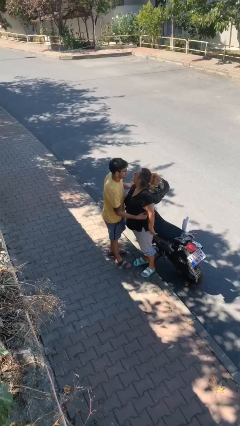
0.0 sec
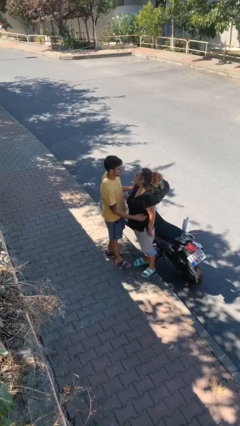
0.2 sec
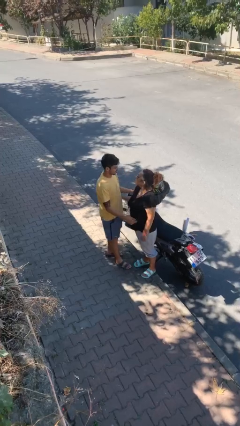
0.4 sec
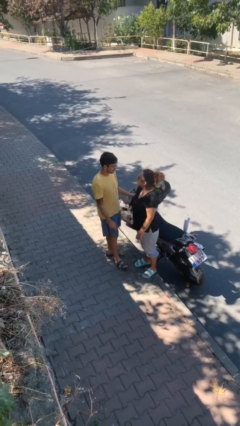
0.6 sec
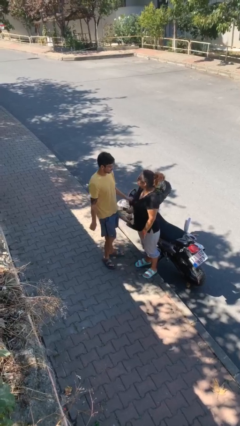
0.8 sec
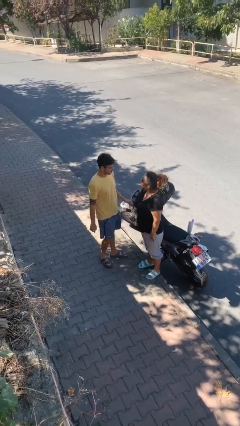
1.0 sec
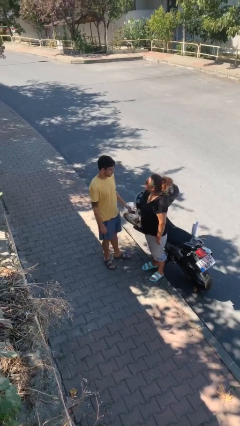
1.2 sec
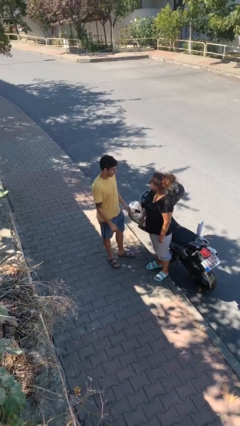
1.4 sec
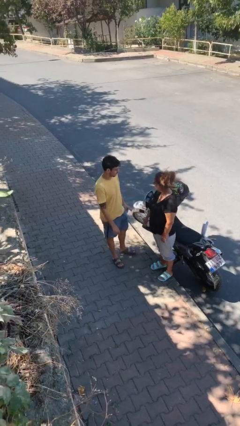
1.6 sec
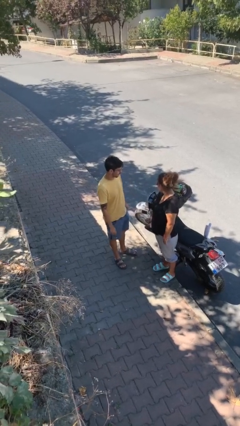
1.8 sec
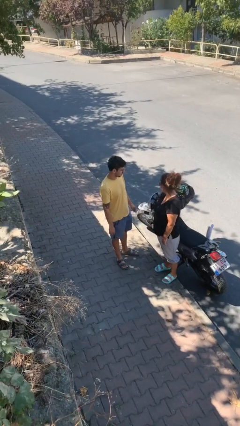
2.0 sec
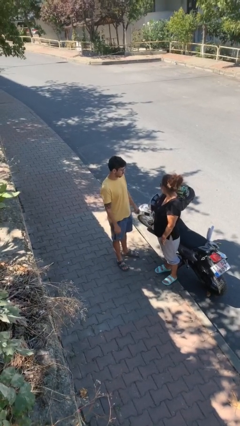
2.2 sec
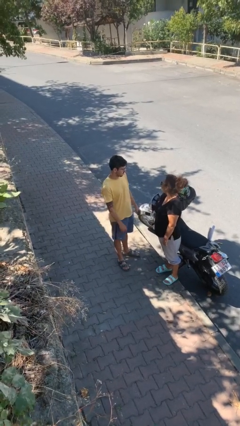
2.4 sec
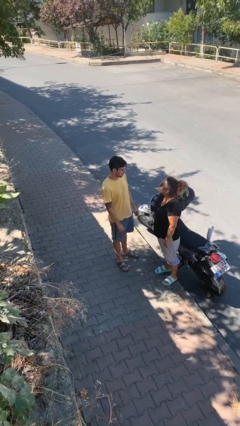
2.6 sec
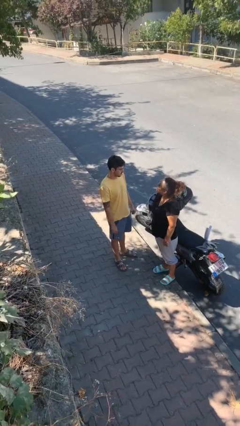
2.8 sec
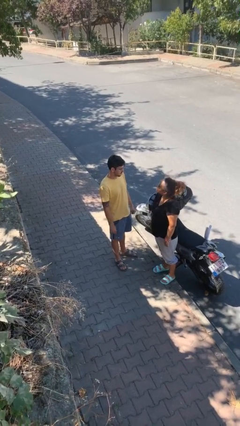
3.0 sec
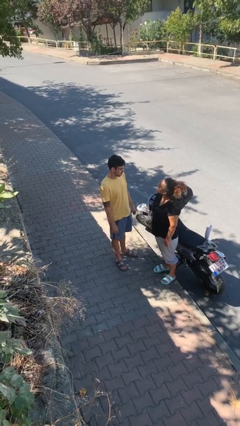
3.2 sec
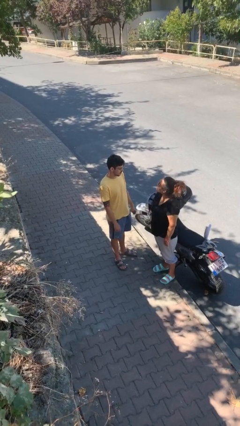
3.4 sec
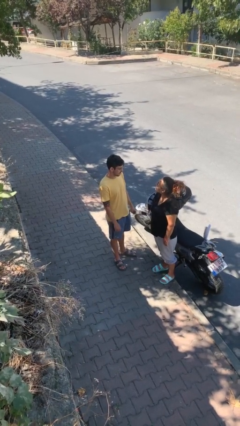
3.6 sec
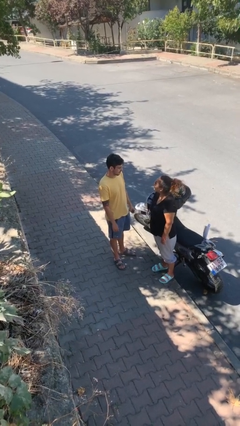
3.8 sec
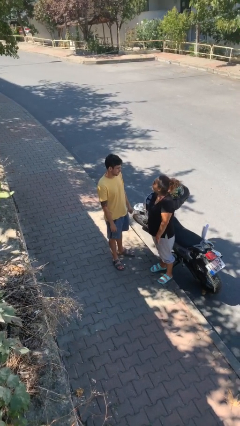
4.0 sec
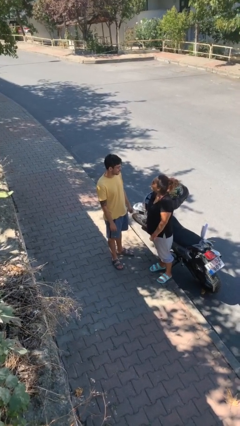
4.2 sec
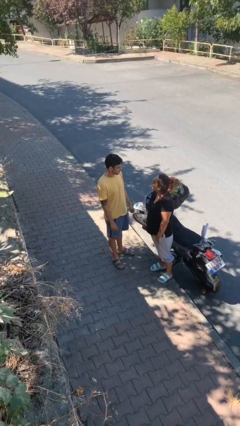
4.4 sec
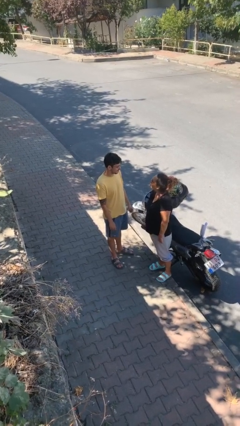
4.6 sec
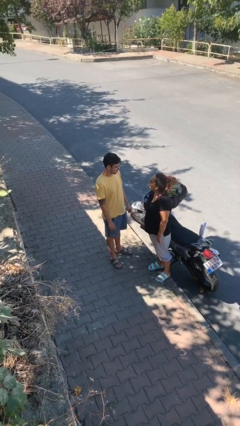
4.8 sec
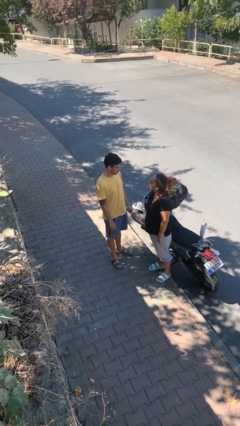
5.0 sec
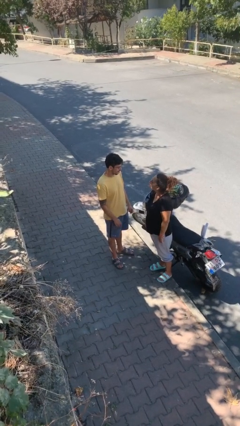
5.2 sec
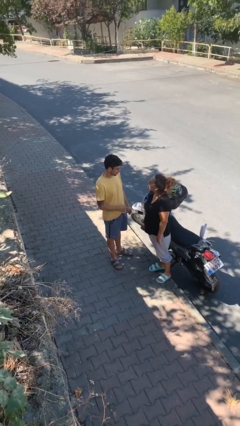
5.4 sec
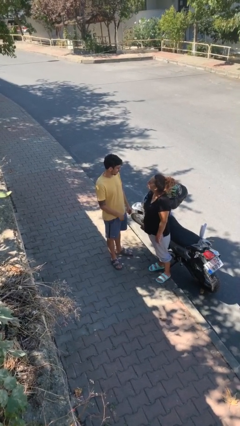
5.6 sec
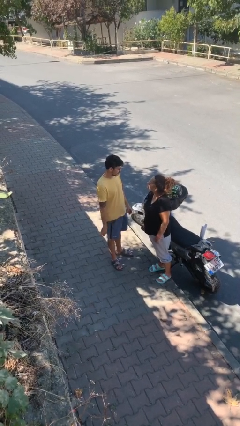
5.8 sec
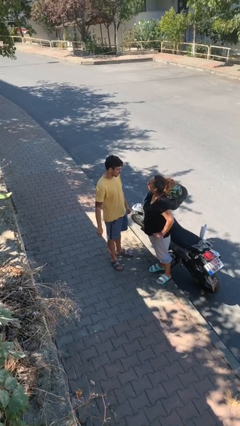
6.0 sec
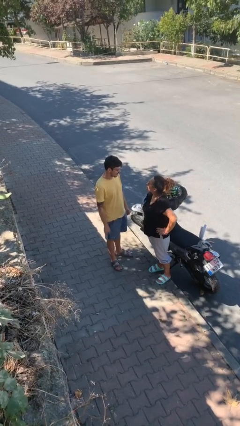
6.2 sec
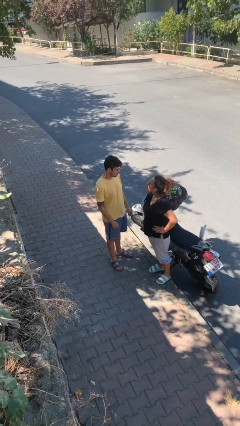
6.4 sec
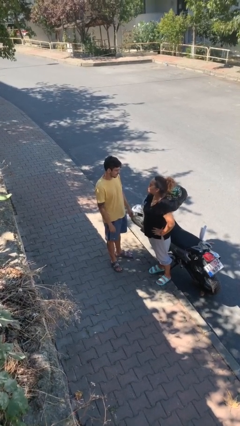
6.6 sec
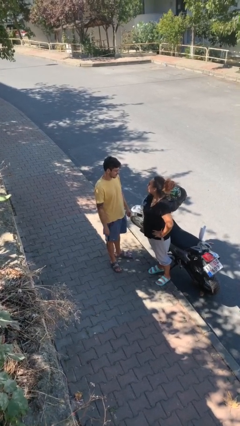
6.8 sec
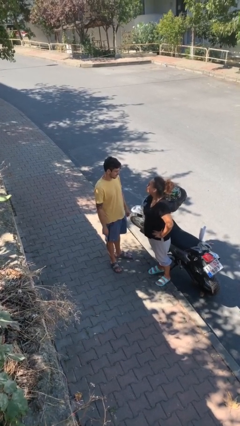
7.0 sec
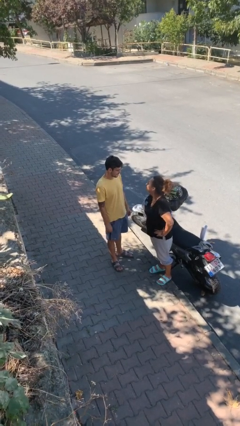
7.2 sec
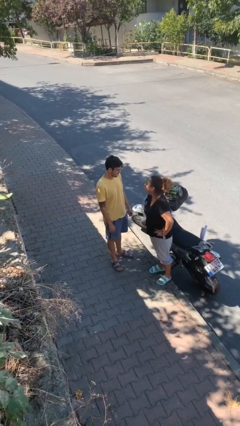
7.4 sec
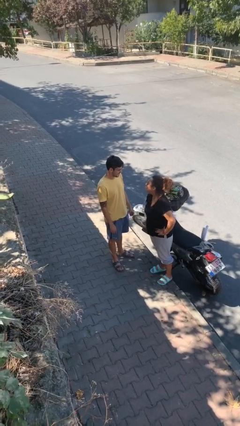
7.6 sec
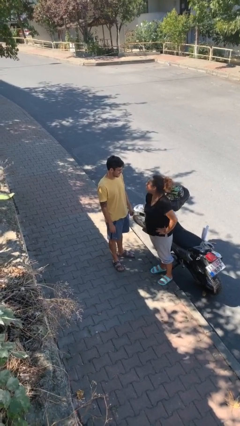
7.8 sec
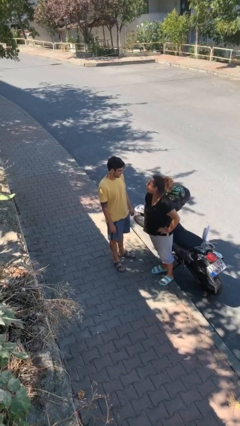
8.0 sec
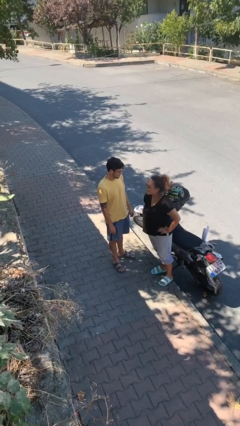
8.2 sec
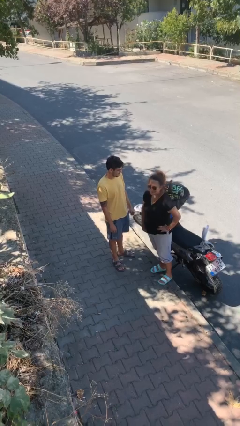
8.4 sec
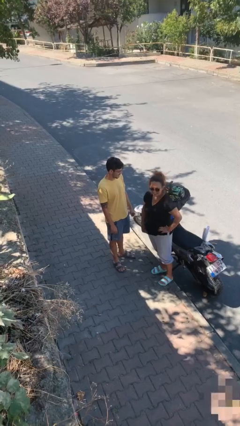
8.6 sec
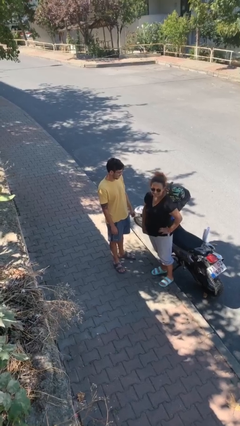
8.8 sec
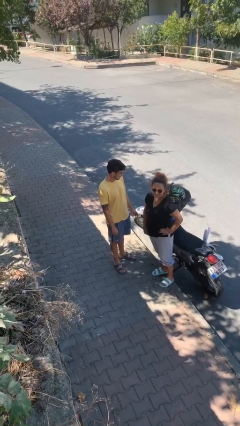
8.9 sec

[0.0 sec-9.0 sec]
person talks to person

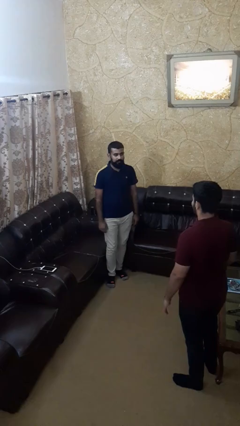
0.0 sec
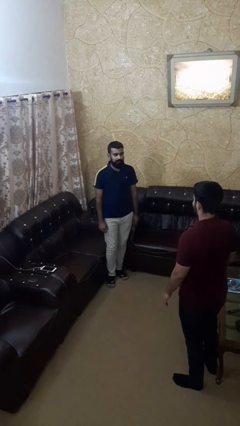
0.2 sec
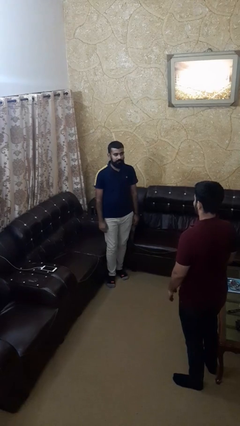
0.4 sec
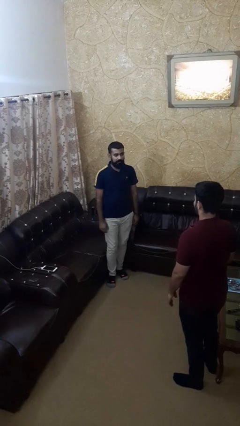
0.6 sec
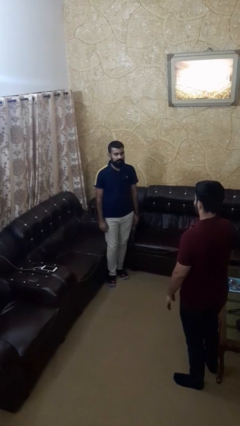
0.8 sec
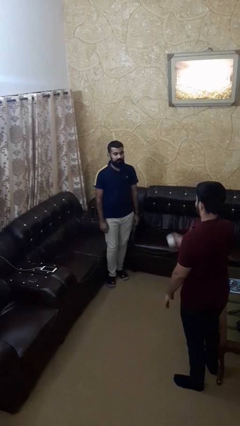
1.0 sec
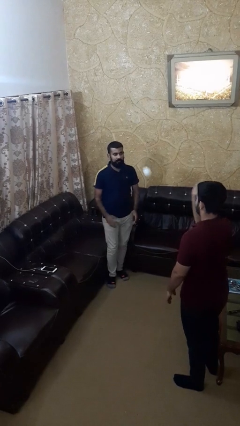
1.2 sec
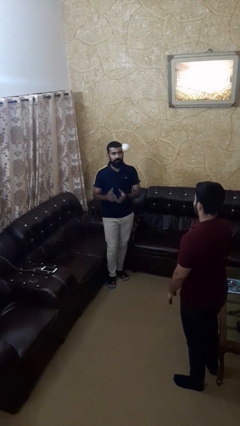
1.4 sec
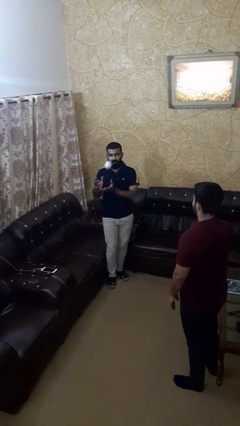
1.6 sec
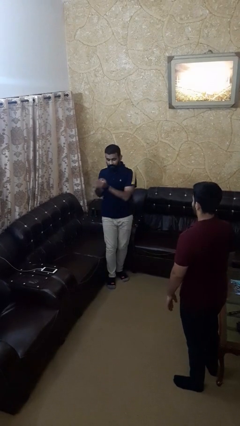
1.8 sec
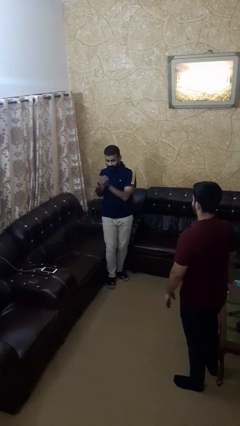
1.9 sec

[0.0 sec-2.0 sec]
person catches object from person

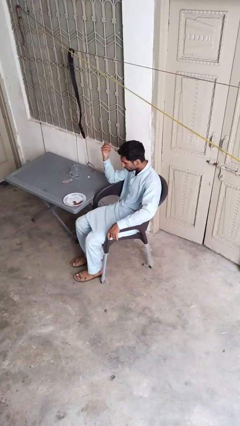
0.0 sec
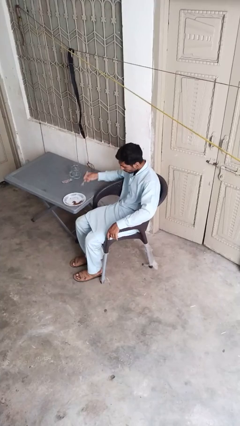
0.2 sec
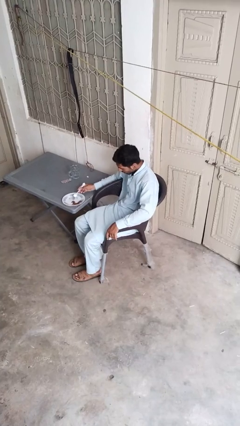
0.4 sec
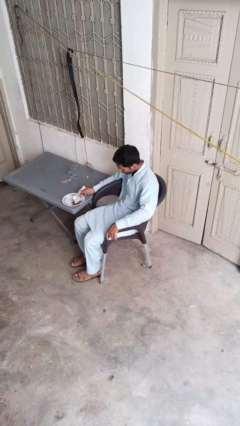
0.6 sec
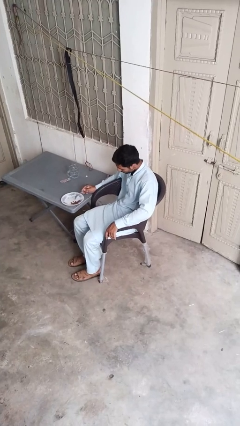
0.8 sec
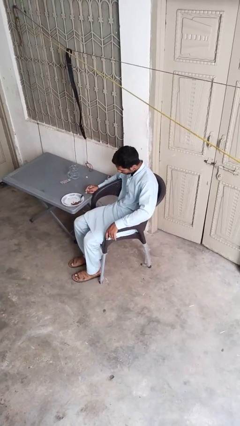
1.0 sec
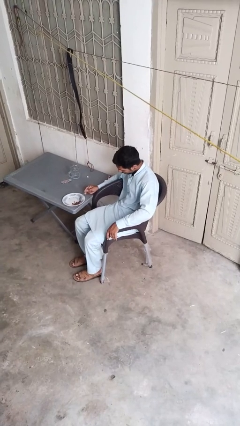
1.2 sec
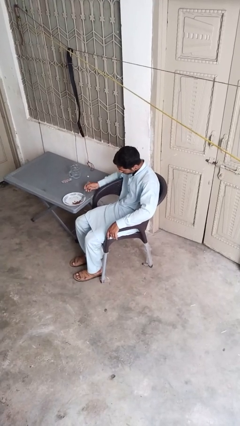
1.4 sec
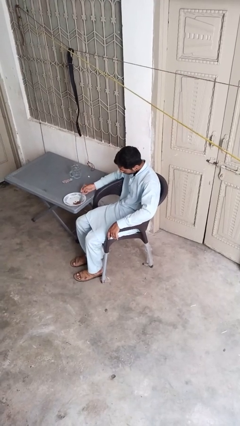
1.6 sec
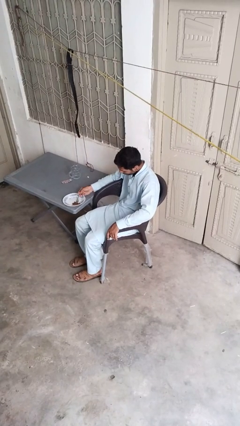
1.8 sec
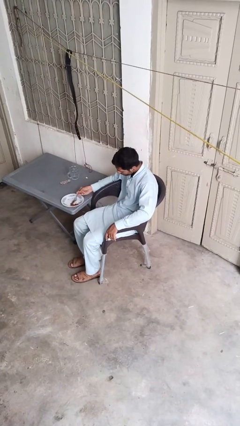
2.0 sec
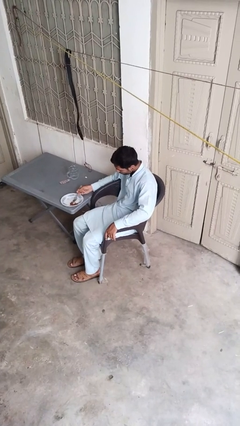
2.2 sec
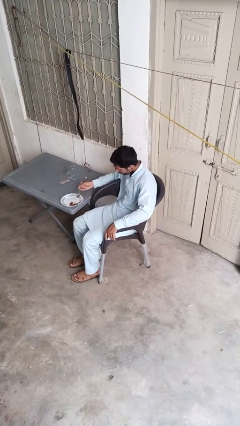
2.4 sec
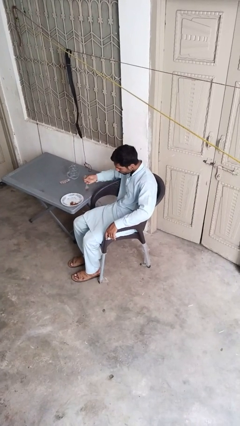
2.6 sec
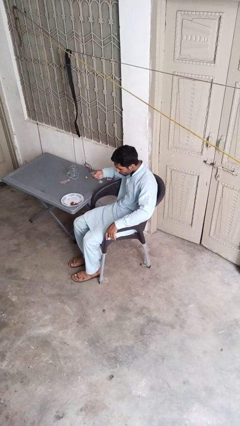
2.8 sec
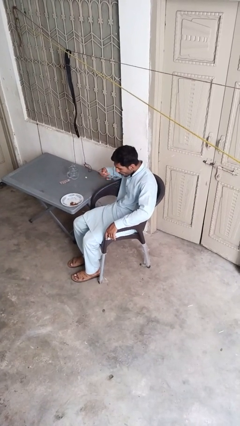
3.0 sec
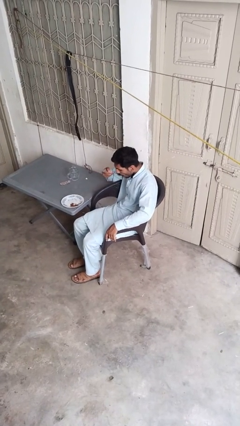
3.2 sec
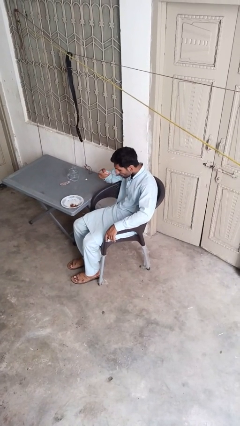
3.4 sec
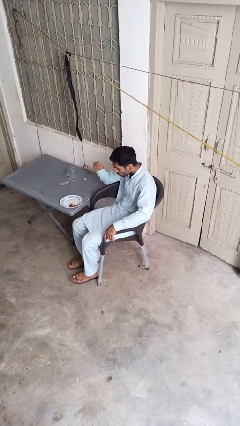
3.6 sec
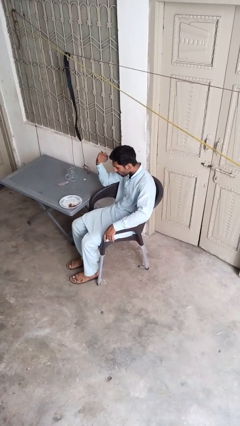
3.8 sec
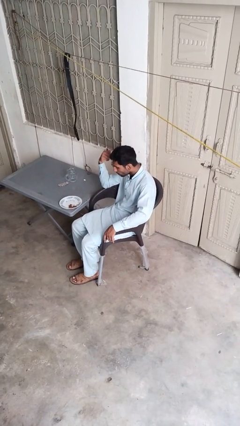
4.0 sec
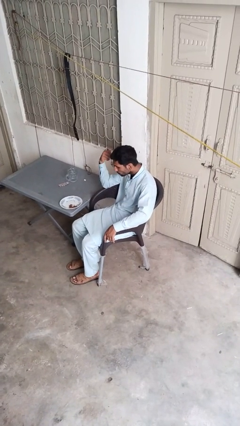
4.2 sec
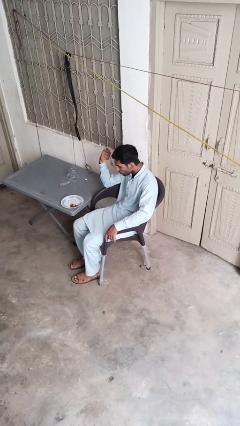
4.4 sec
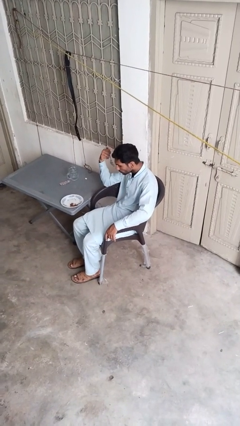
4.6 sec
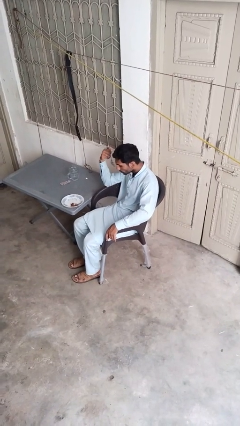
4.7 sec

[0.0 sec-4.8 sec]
person eats with utensil

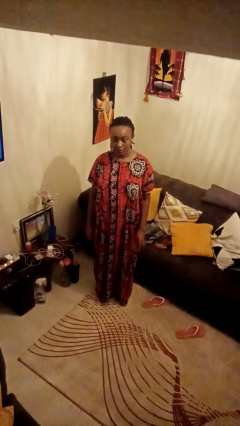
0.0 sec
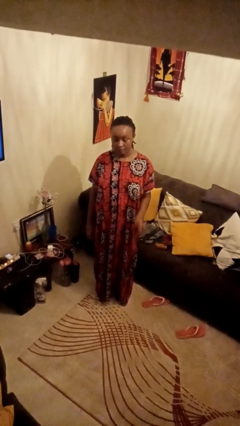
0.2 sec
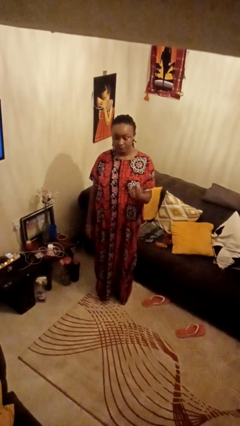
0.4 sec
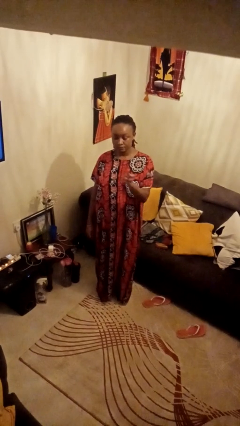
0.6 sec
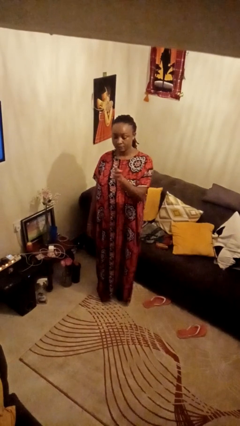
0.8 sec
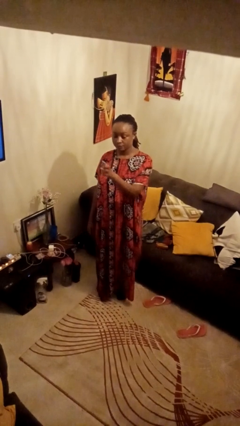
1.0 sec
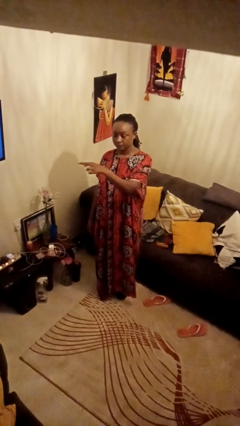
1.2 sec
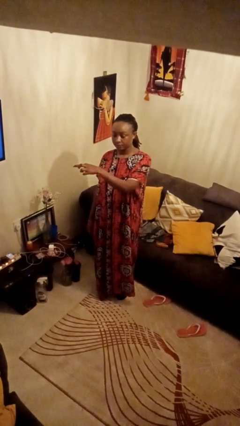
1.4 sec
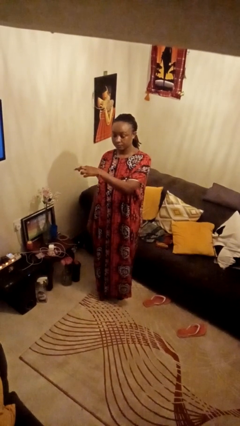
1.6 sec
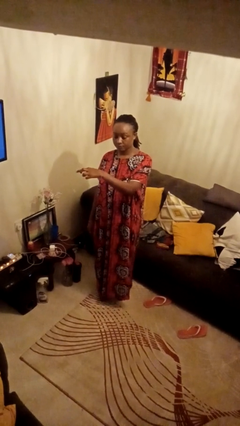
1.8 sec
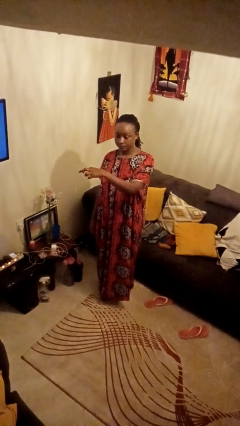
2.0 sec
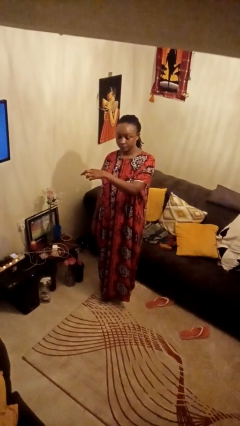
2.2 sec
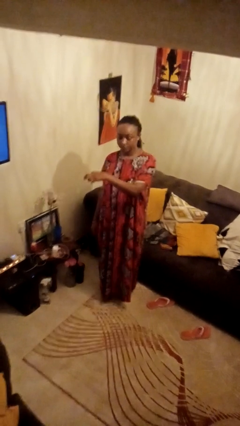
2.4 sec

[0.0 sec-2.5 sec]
person gestures swipe left
